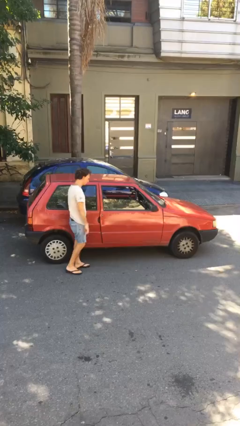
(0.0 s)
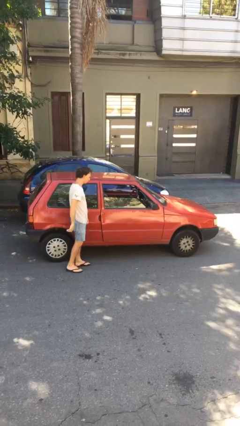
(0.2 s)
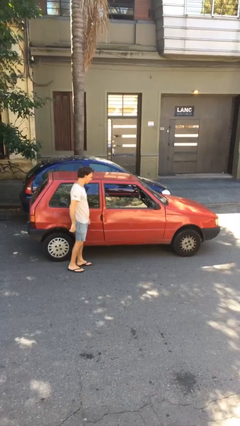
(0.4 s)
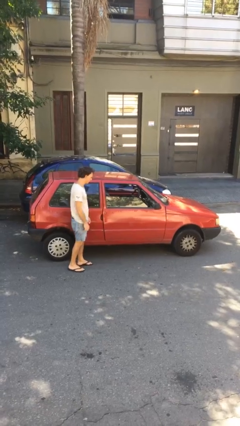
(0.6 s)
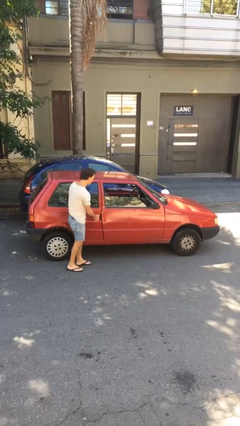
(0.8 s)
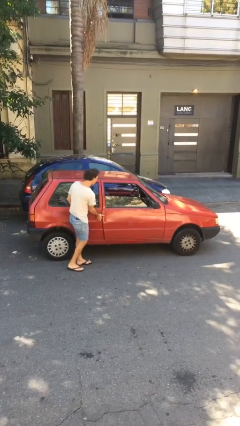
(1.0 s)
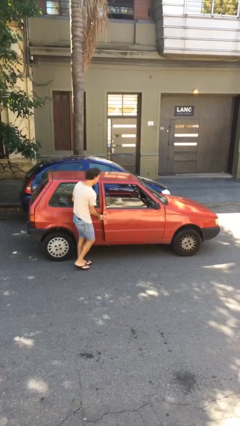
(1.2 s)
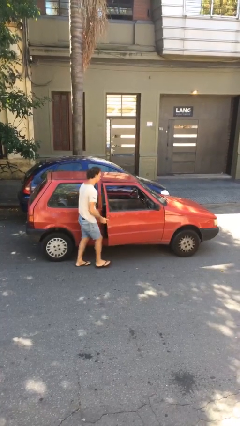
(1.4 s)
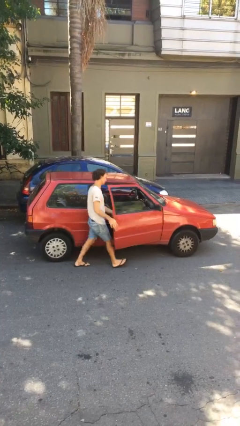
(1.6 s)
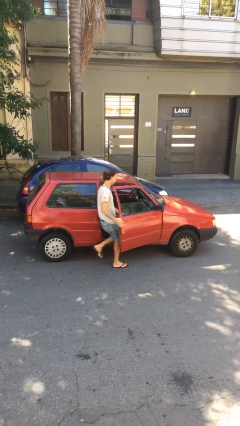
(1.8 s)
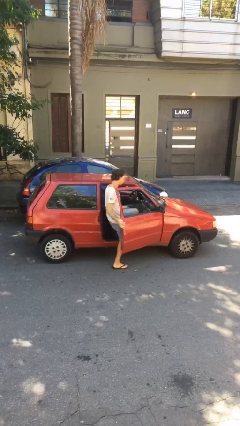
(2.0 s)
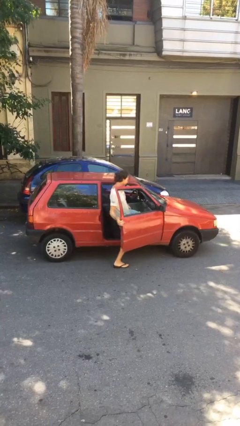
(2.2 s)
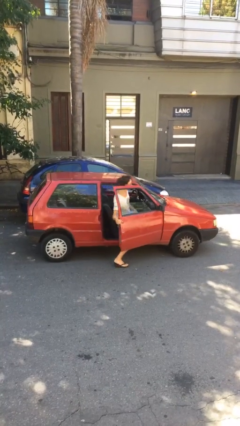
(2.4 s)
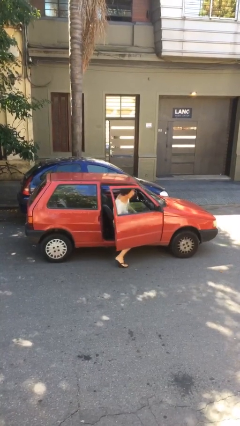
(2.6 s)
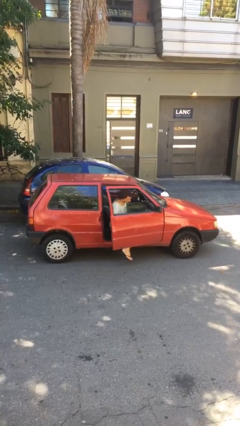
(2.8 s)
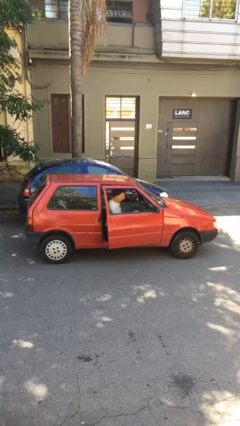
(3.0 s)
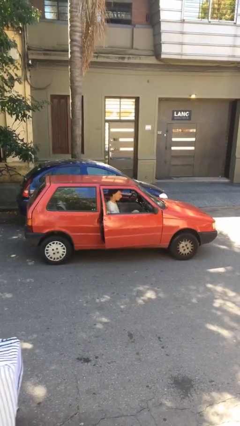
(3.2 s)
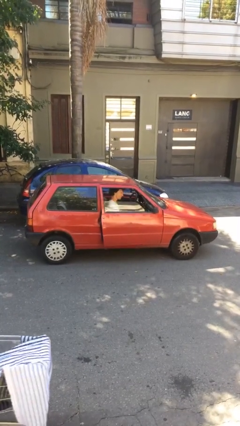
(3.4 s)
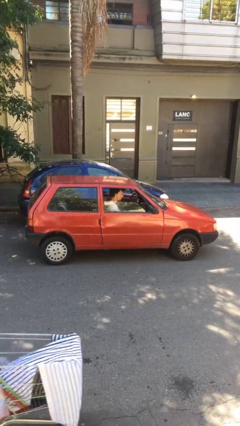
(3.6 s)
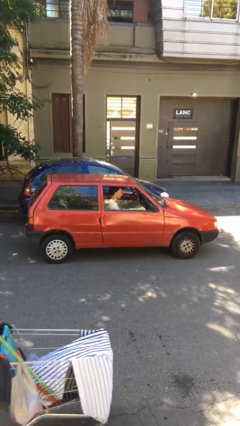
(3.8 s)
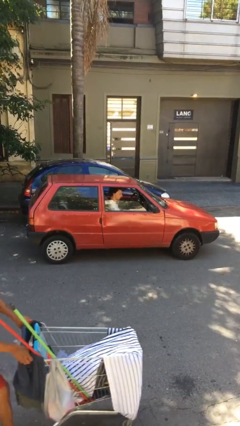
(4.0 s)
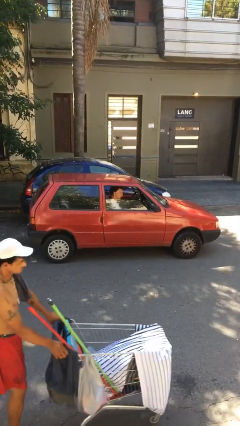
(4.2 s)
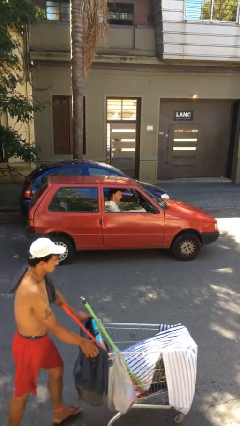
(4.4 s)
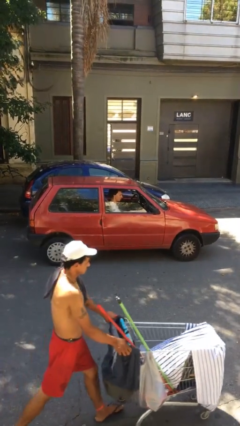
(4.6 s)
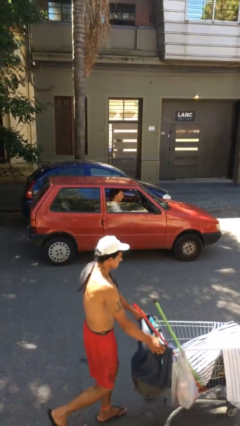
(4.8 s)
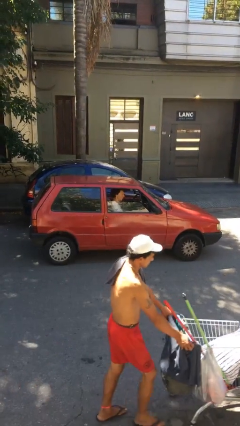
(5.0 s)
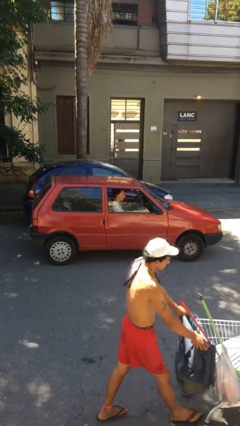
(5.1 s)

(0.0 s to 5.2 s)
car picks up person

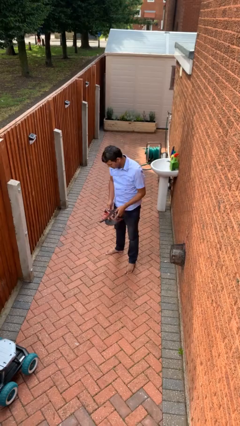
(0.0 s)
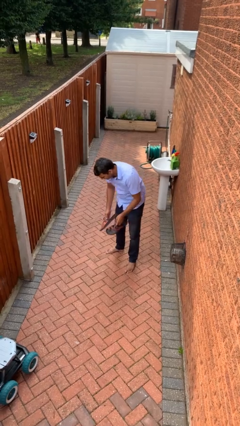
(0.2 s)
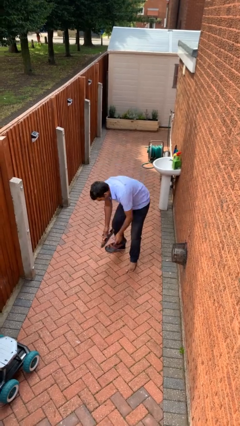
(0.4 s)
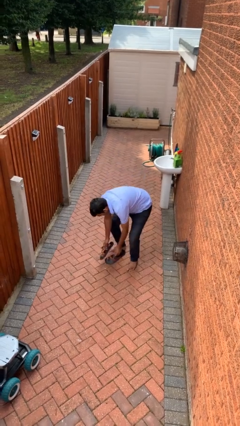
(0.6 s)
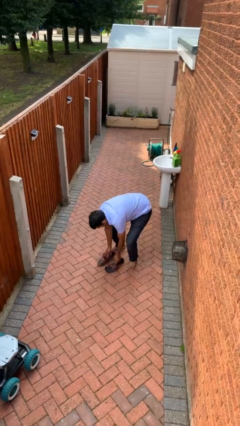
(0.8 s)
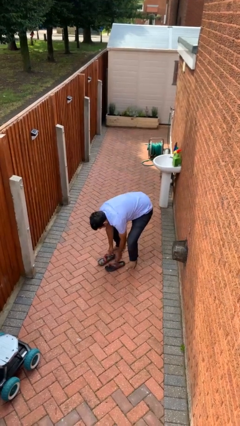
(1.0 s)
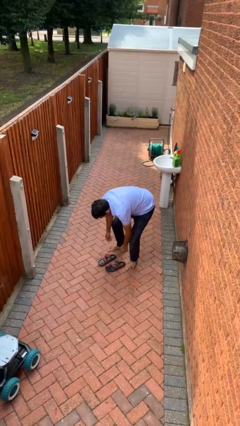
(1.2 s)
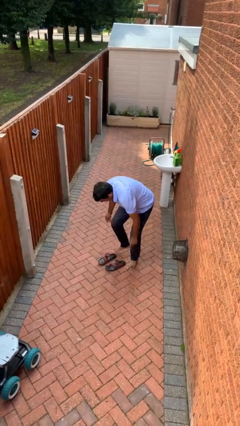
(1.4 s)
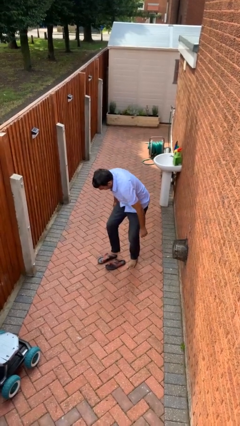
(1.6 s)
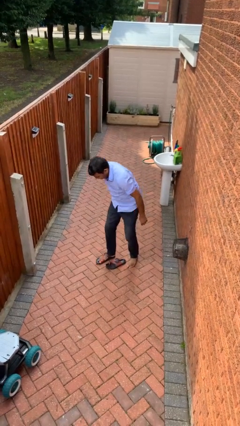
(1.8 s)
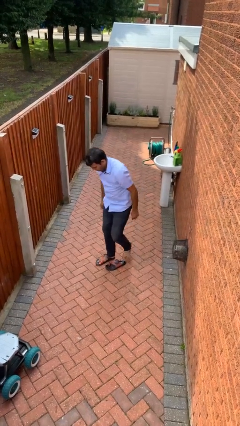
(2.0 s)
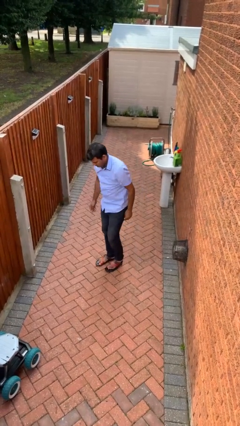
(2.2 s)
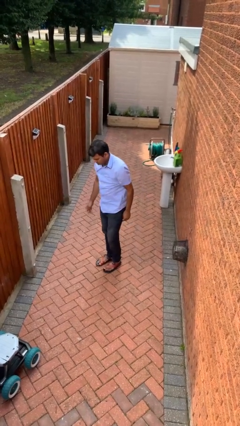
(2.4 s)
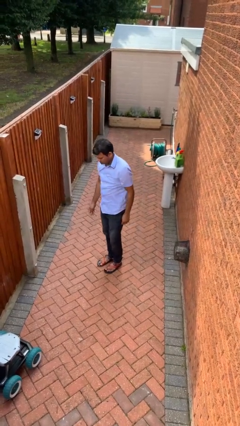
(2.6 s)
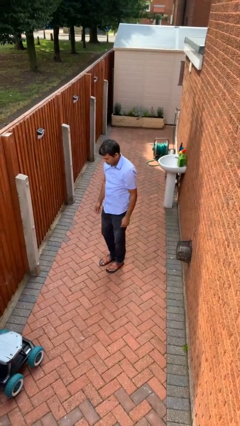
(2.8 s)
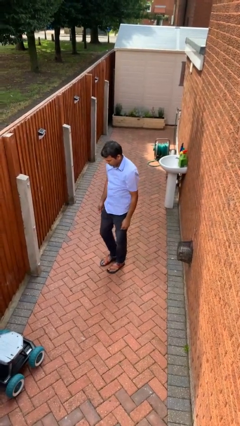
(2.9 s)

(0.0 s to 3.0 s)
person puts on shoes

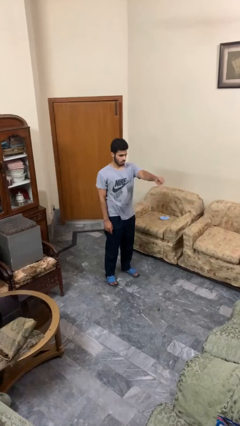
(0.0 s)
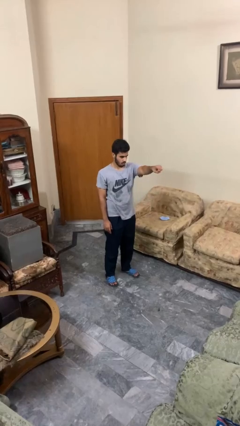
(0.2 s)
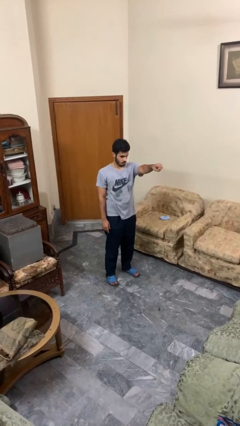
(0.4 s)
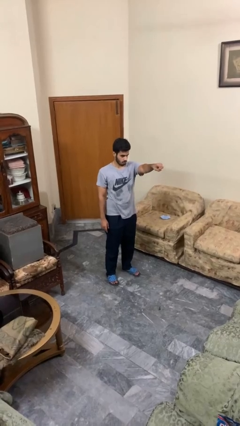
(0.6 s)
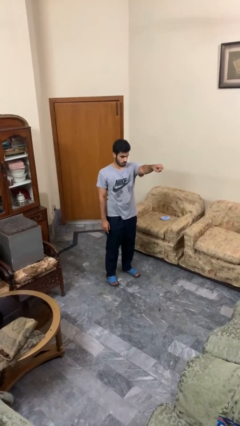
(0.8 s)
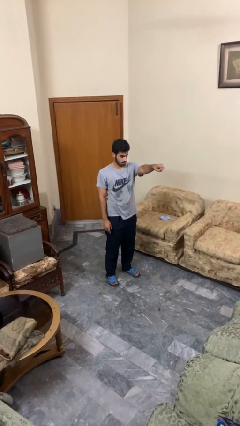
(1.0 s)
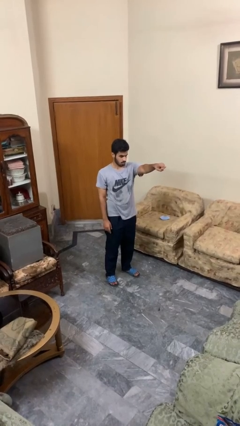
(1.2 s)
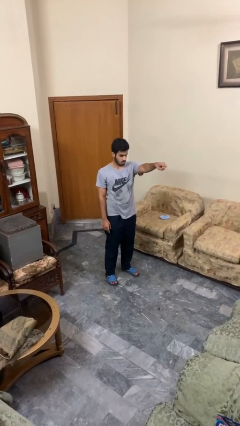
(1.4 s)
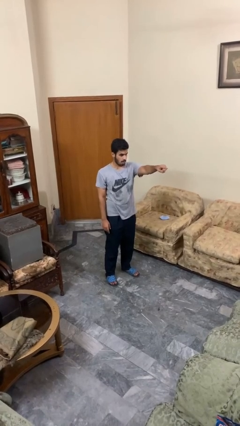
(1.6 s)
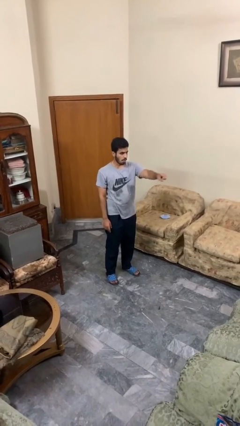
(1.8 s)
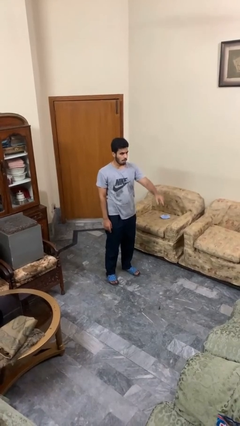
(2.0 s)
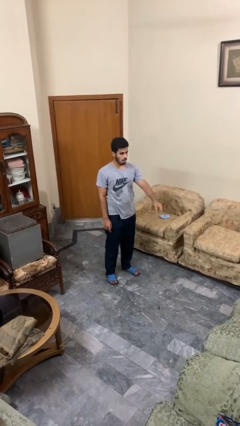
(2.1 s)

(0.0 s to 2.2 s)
person points at person

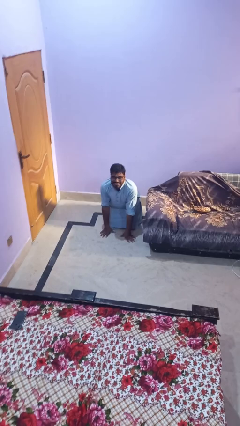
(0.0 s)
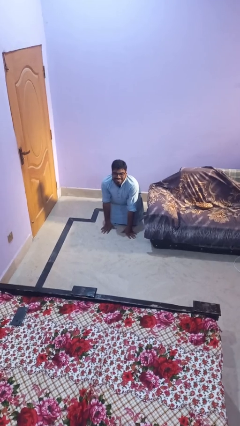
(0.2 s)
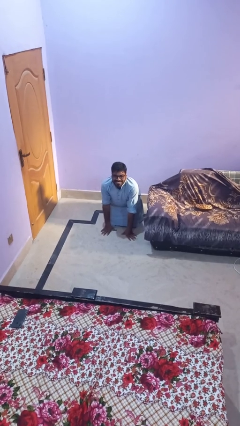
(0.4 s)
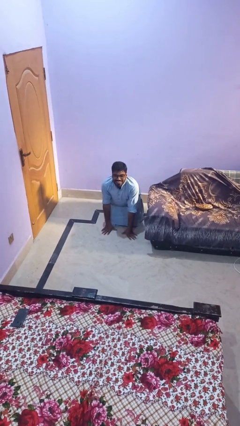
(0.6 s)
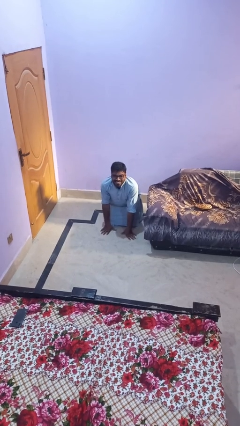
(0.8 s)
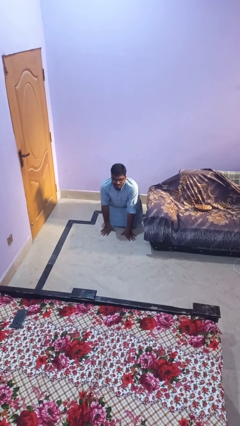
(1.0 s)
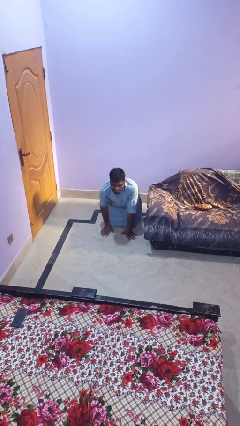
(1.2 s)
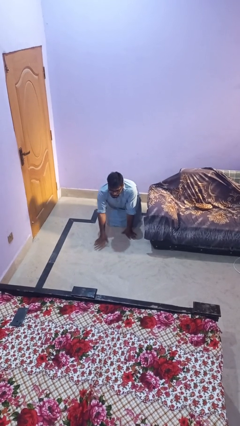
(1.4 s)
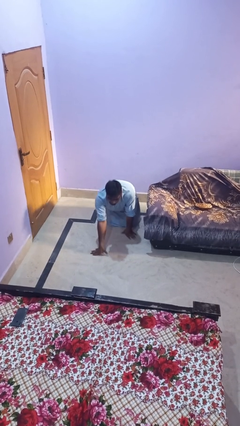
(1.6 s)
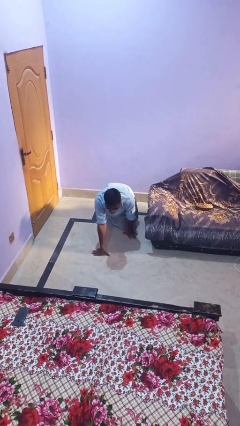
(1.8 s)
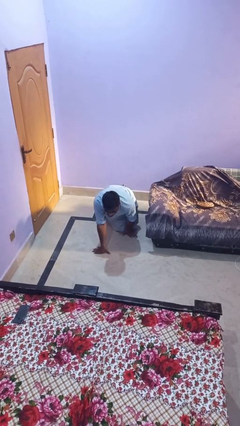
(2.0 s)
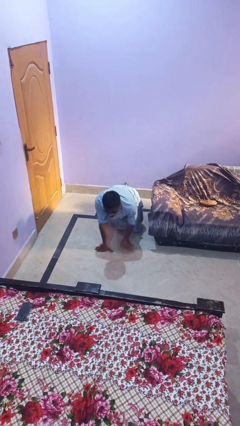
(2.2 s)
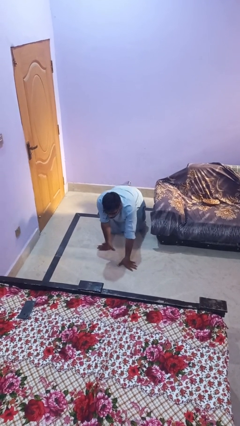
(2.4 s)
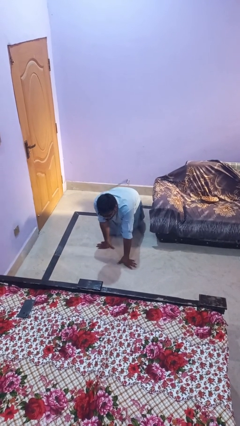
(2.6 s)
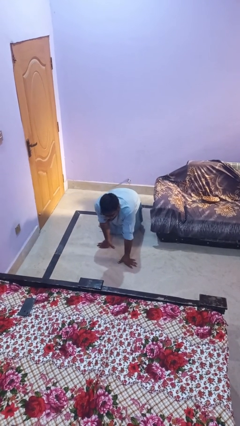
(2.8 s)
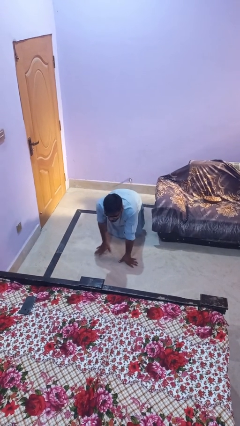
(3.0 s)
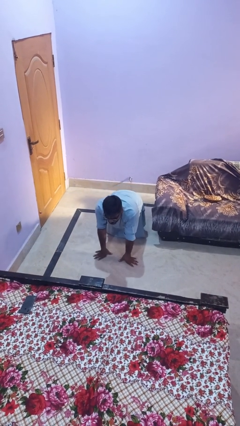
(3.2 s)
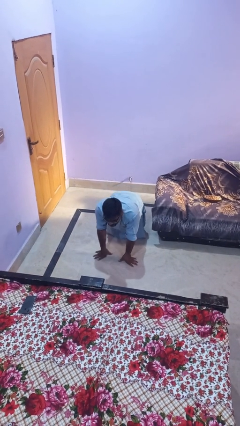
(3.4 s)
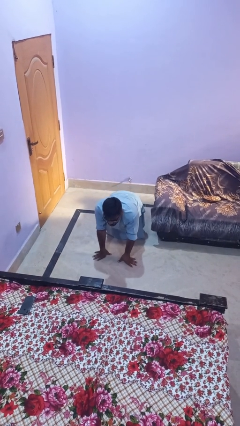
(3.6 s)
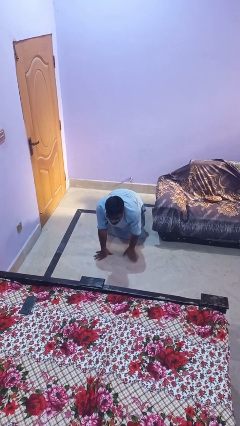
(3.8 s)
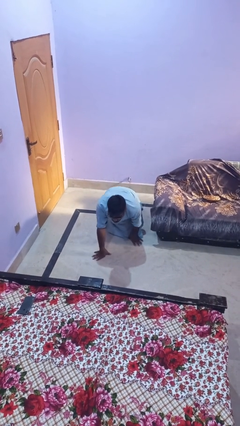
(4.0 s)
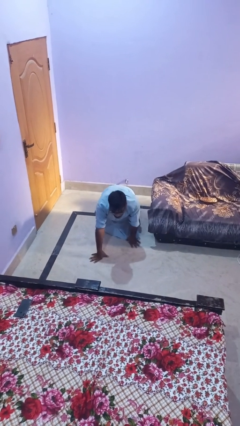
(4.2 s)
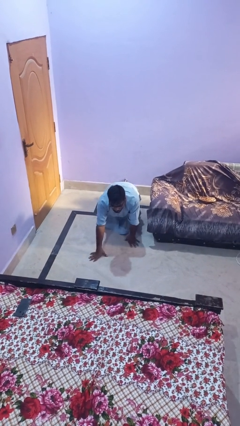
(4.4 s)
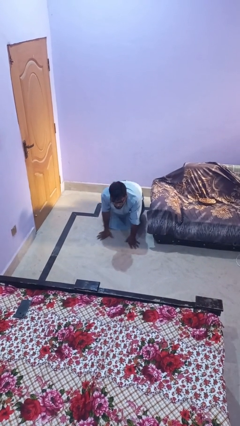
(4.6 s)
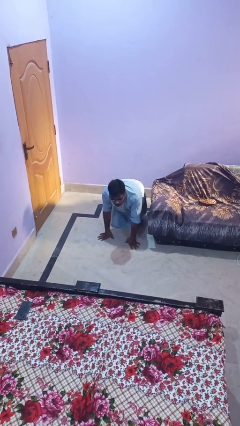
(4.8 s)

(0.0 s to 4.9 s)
person crawls

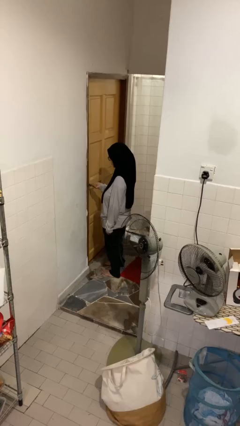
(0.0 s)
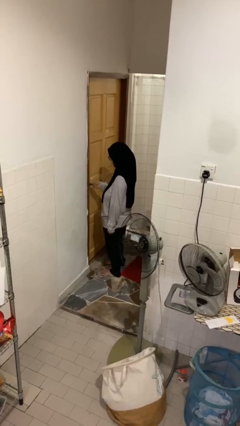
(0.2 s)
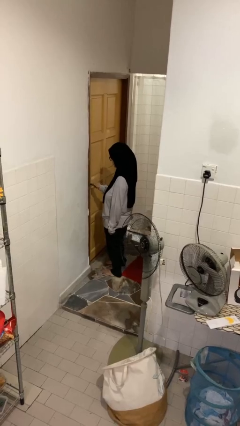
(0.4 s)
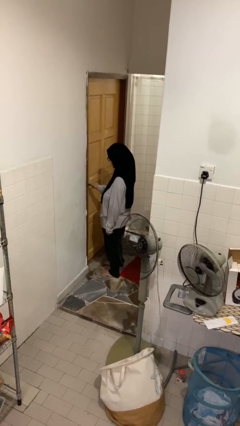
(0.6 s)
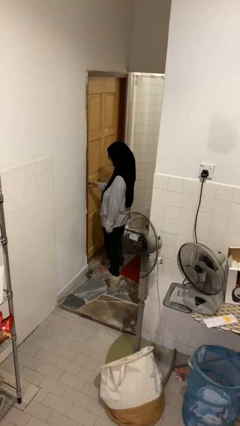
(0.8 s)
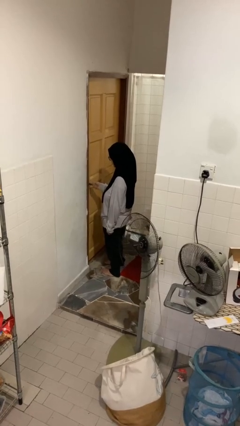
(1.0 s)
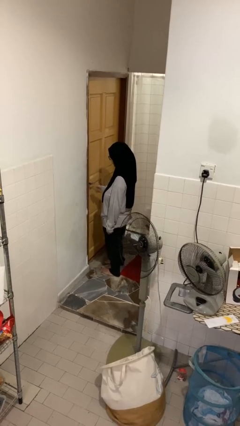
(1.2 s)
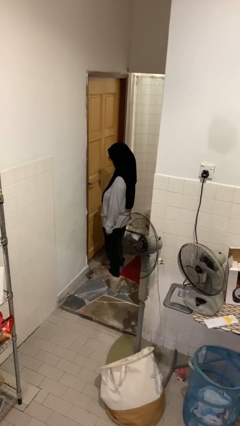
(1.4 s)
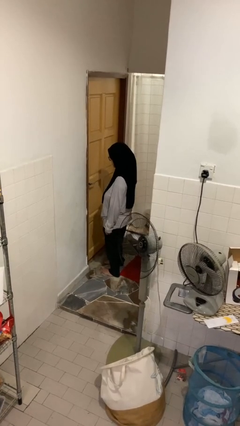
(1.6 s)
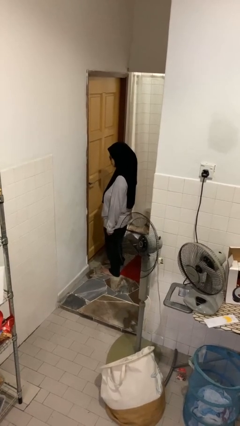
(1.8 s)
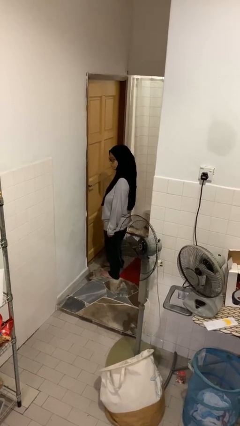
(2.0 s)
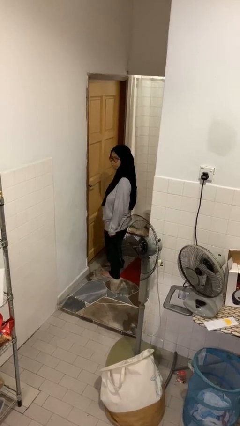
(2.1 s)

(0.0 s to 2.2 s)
person locks door with keys
